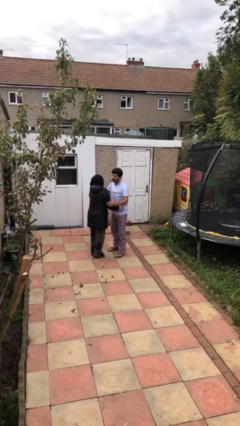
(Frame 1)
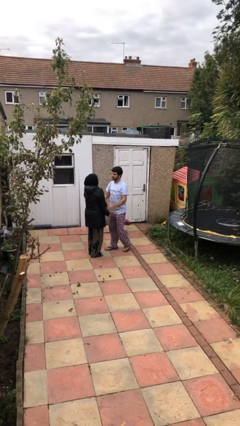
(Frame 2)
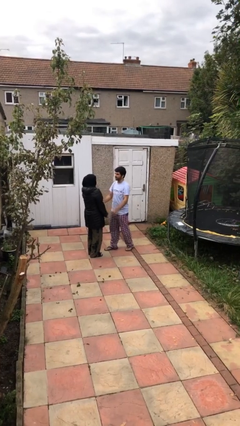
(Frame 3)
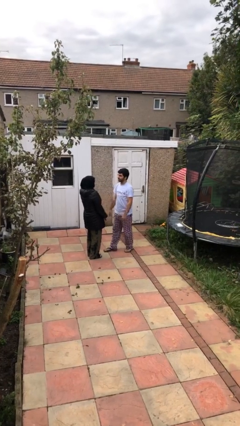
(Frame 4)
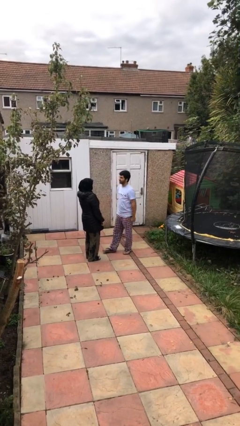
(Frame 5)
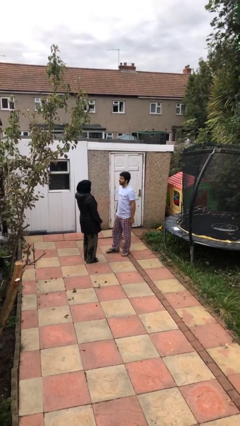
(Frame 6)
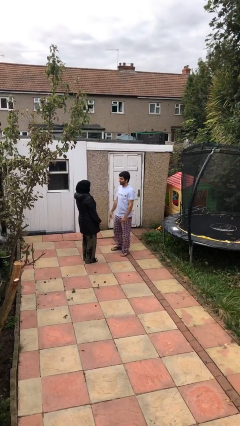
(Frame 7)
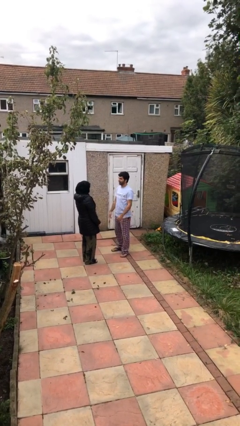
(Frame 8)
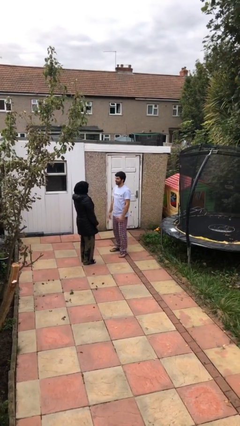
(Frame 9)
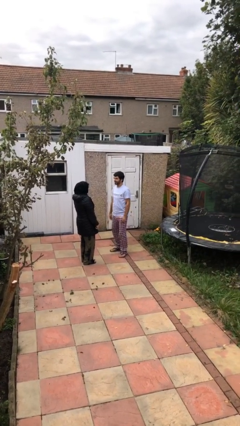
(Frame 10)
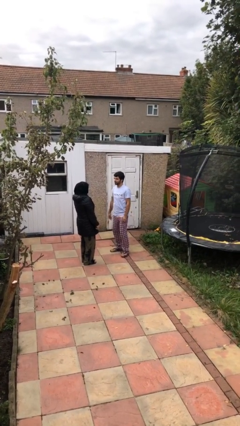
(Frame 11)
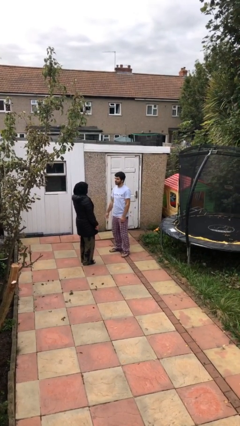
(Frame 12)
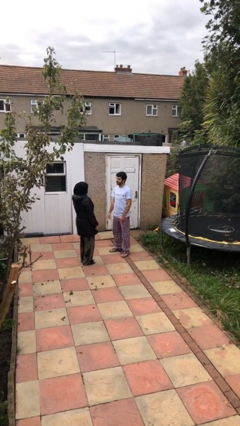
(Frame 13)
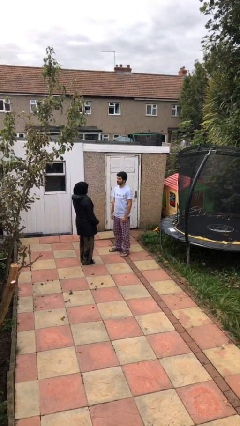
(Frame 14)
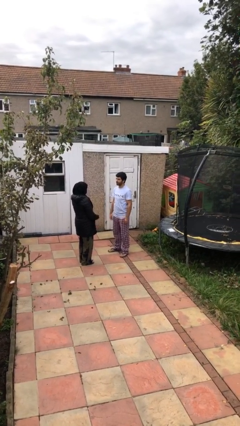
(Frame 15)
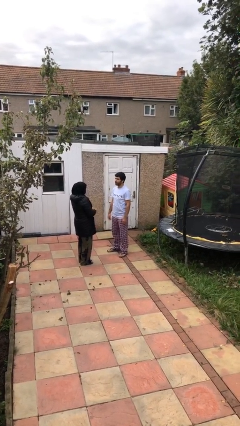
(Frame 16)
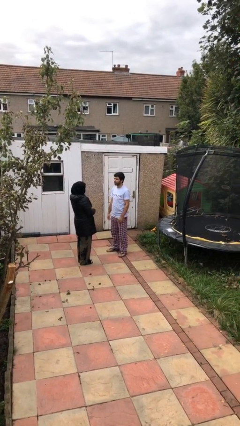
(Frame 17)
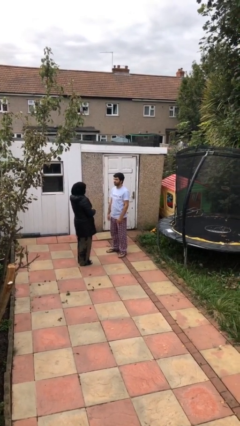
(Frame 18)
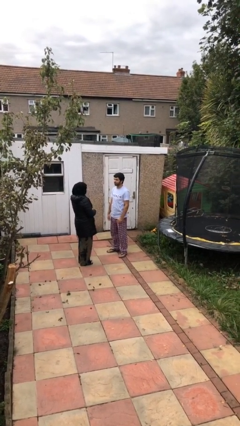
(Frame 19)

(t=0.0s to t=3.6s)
person talks to person

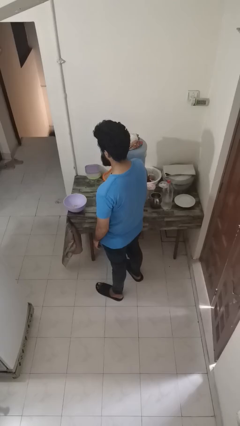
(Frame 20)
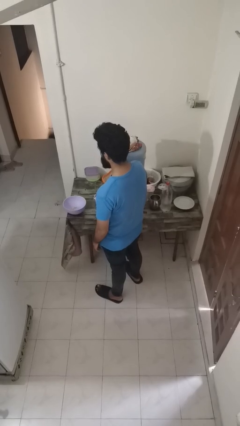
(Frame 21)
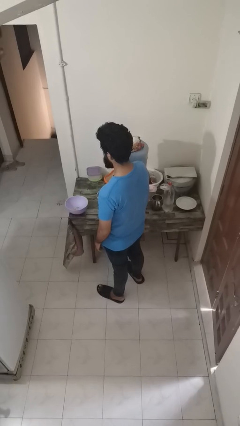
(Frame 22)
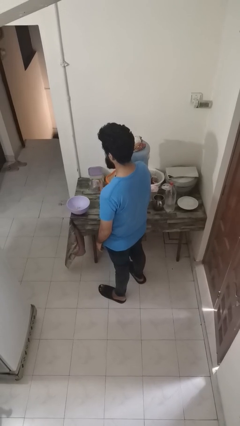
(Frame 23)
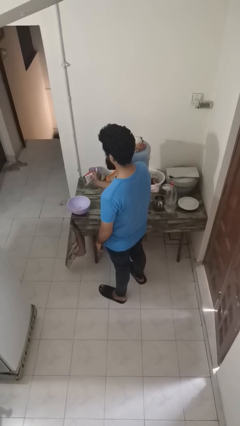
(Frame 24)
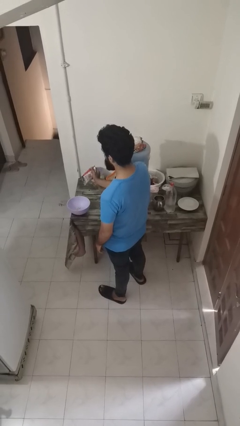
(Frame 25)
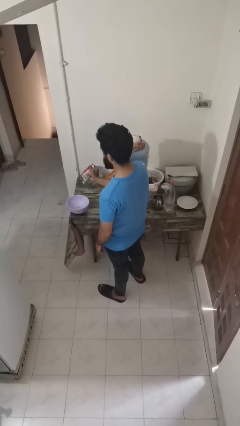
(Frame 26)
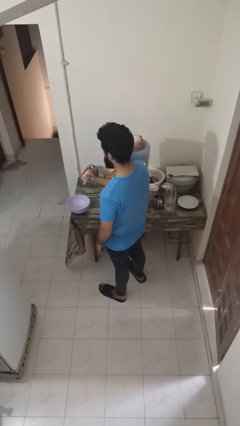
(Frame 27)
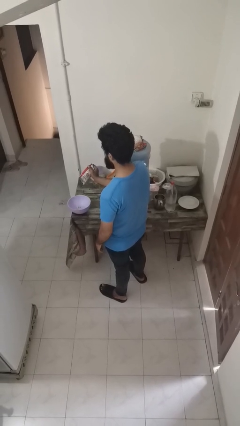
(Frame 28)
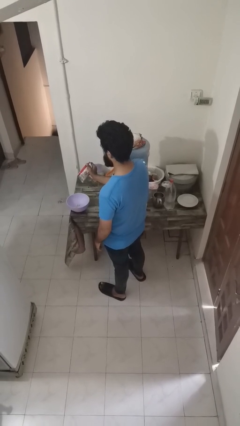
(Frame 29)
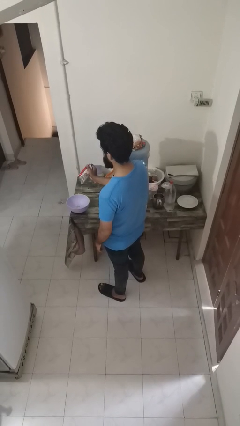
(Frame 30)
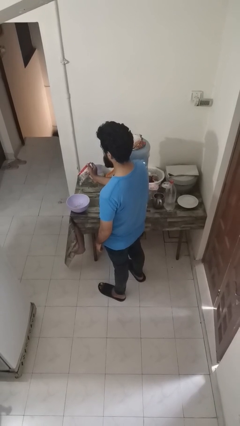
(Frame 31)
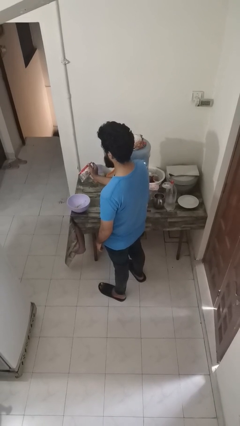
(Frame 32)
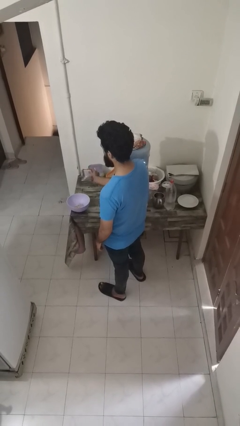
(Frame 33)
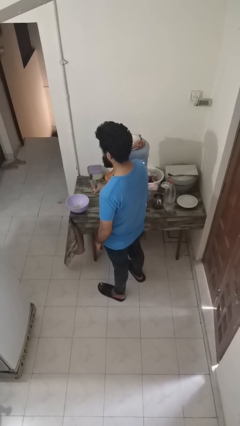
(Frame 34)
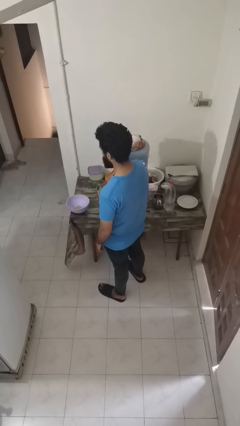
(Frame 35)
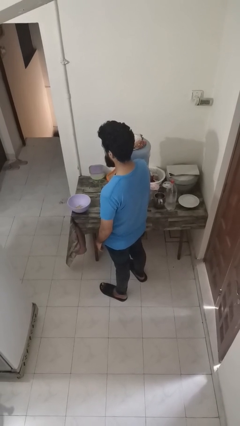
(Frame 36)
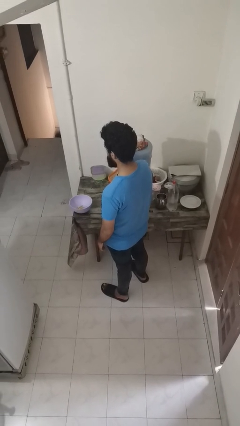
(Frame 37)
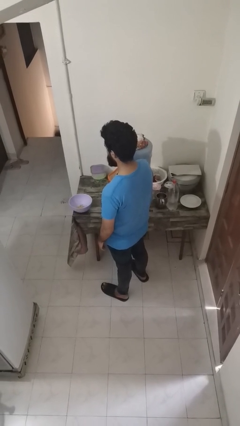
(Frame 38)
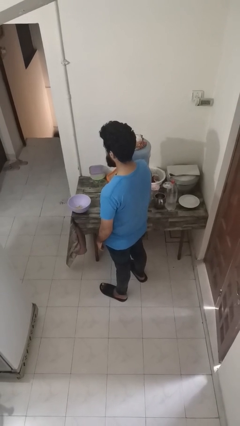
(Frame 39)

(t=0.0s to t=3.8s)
person pours into bowl

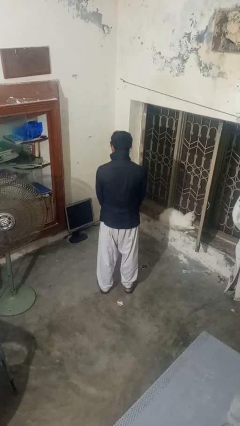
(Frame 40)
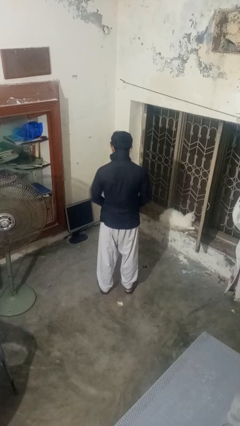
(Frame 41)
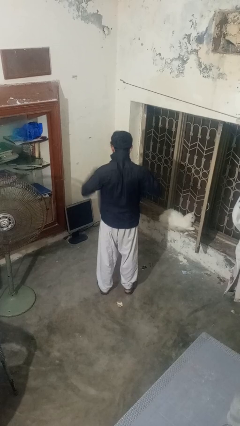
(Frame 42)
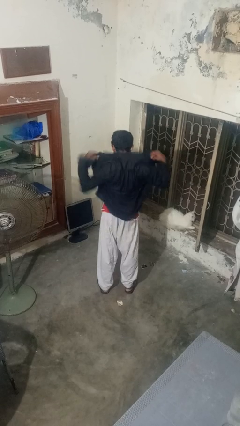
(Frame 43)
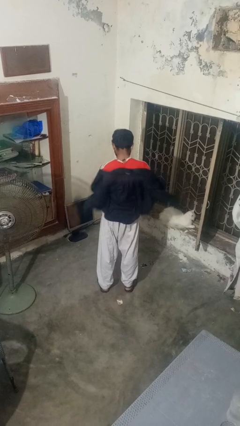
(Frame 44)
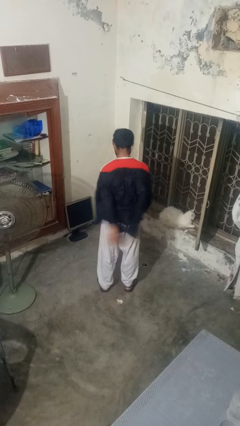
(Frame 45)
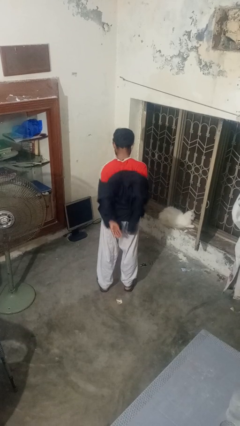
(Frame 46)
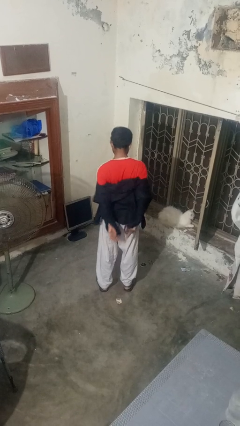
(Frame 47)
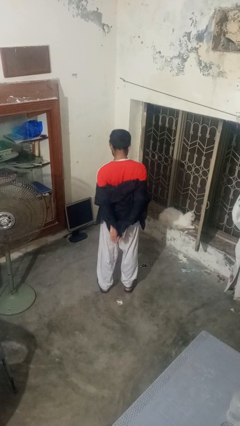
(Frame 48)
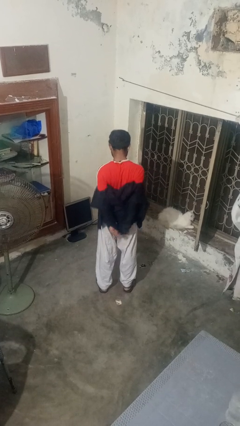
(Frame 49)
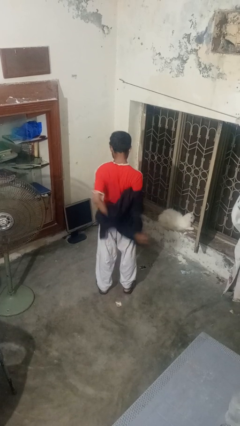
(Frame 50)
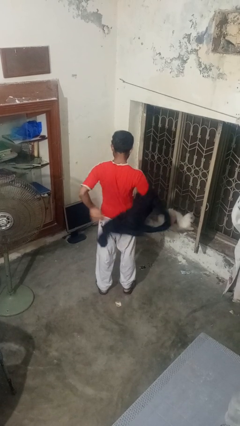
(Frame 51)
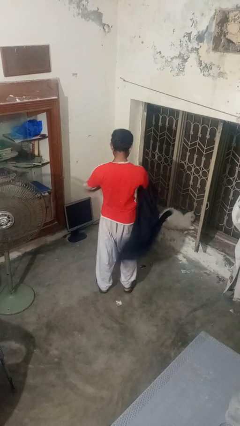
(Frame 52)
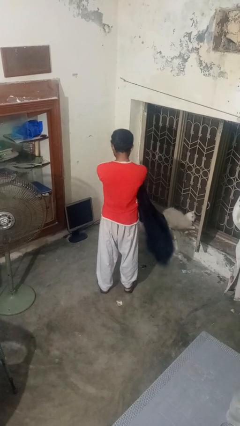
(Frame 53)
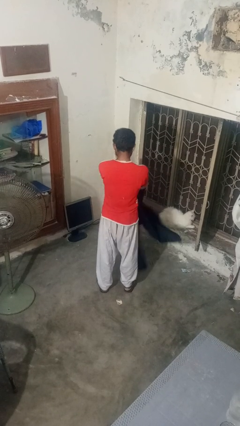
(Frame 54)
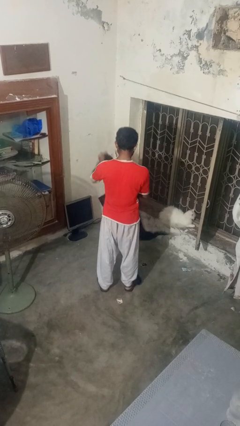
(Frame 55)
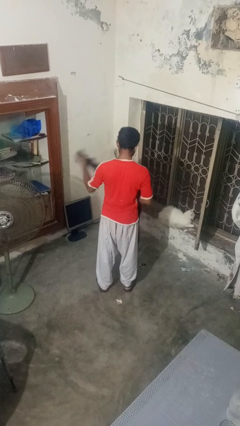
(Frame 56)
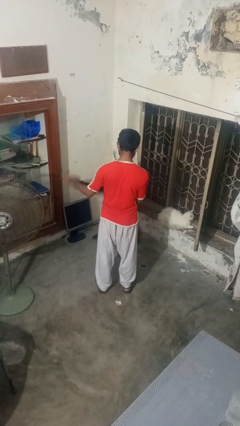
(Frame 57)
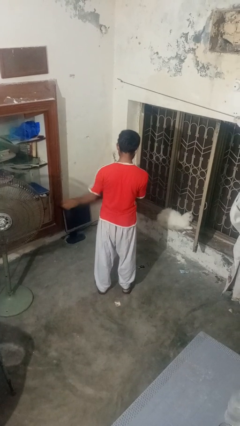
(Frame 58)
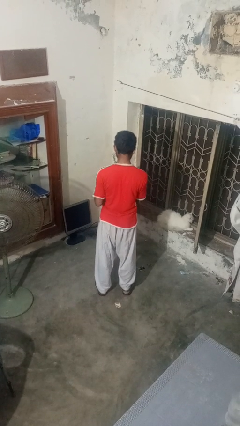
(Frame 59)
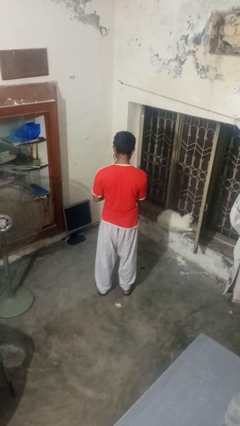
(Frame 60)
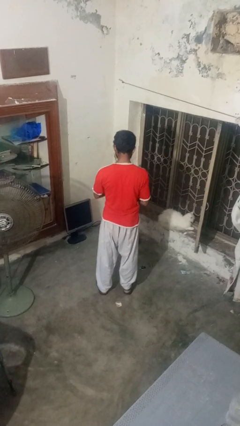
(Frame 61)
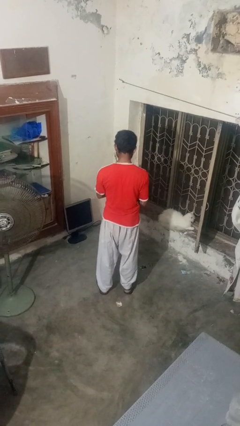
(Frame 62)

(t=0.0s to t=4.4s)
person takes off shirt

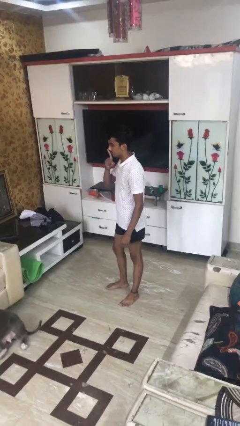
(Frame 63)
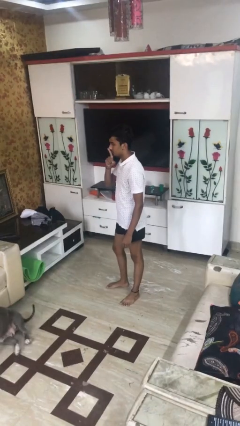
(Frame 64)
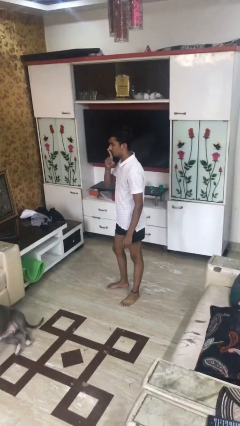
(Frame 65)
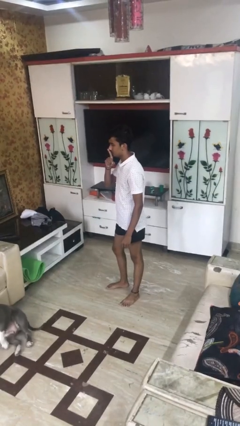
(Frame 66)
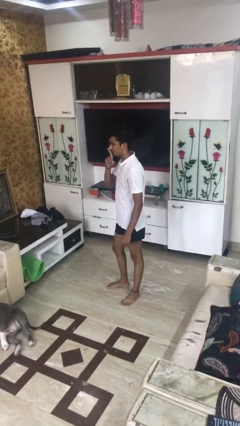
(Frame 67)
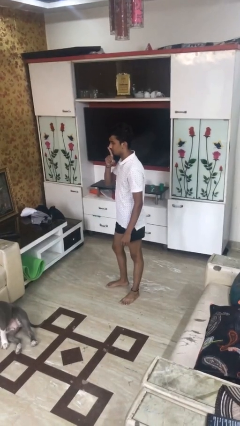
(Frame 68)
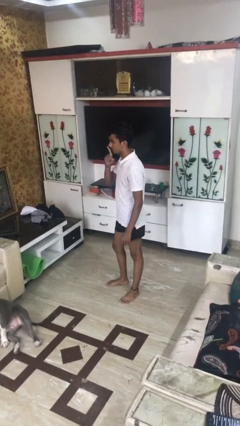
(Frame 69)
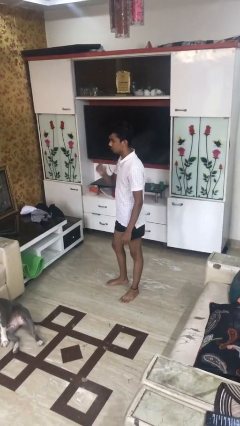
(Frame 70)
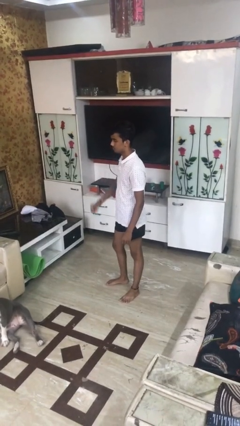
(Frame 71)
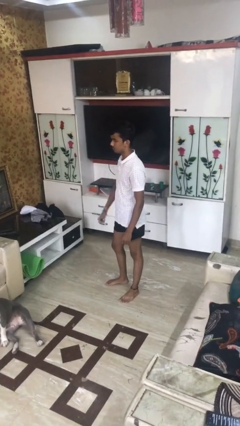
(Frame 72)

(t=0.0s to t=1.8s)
person gestures be quiet

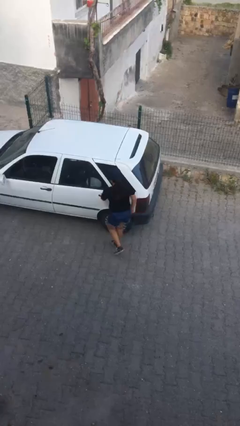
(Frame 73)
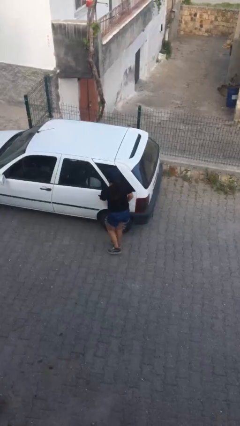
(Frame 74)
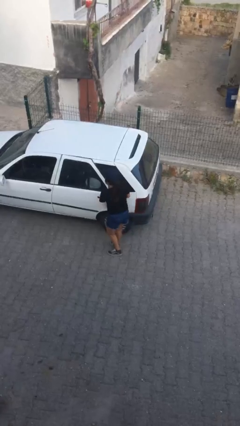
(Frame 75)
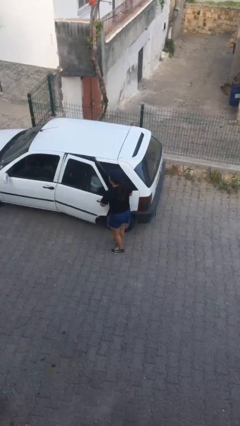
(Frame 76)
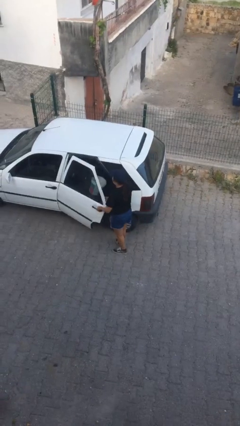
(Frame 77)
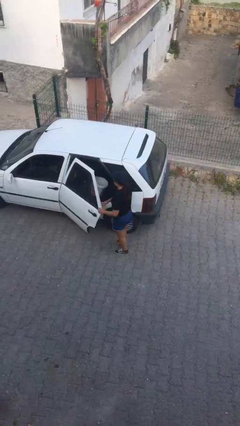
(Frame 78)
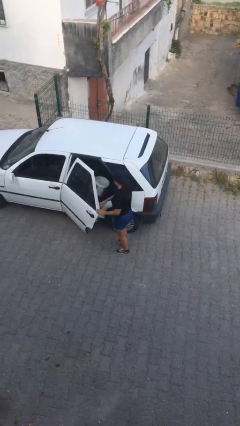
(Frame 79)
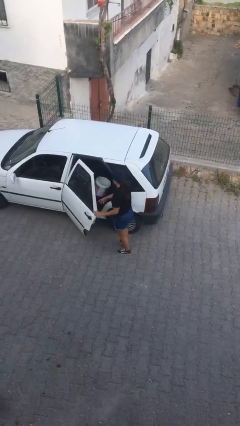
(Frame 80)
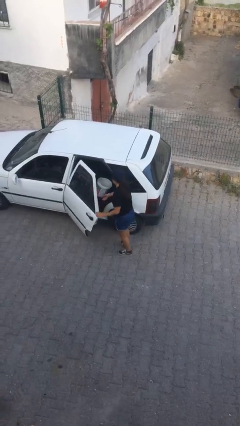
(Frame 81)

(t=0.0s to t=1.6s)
person opens car door

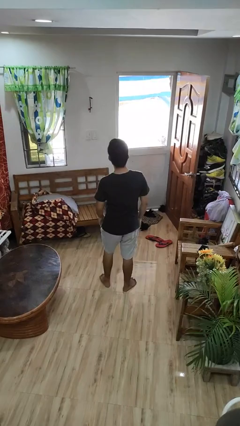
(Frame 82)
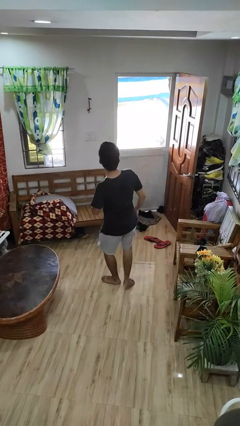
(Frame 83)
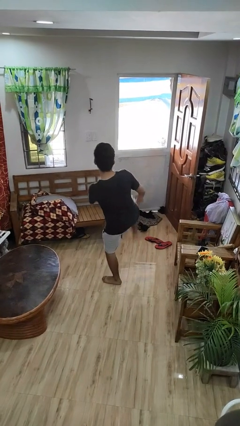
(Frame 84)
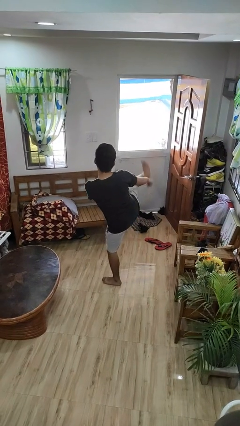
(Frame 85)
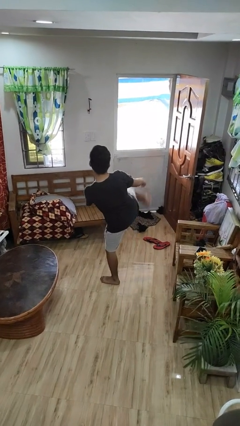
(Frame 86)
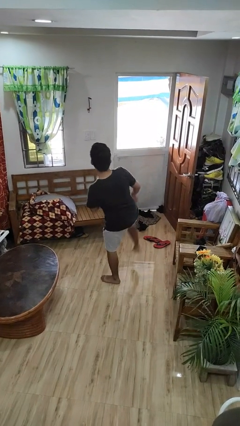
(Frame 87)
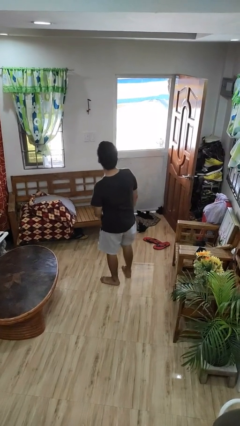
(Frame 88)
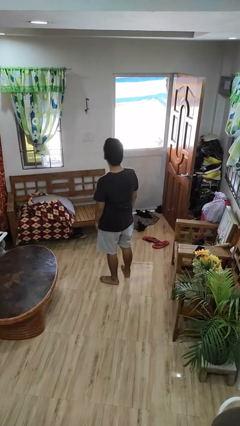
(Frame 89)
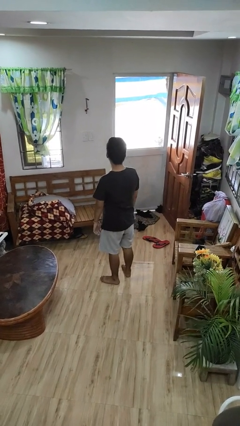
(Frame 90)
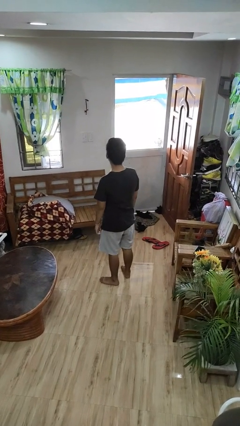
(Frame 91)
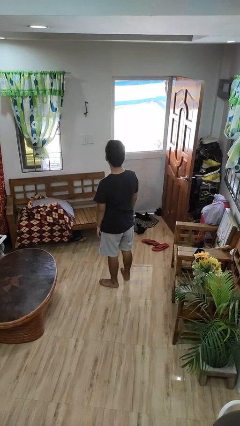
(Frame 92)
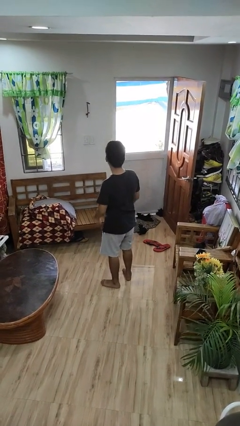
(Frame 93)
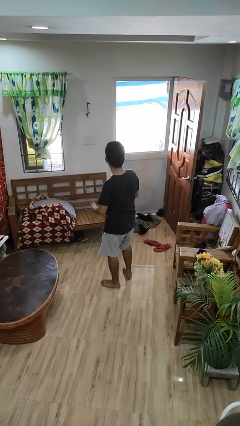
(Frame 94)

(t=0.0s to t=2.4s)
person karate kicks
